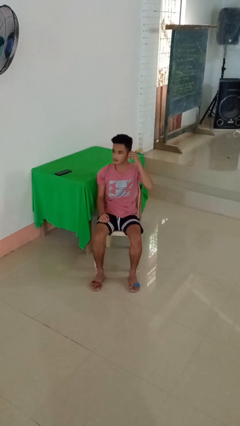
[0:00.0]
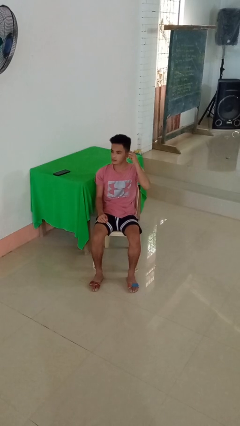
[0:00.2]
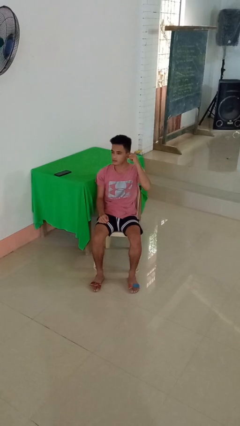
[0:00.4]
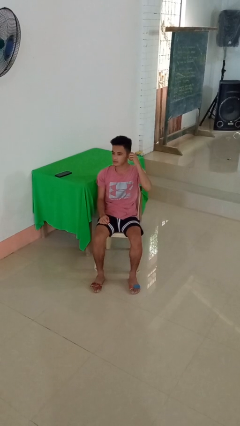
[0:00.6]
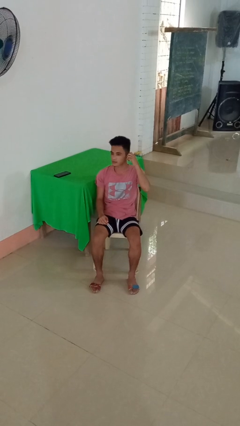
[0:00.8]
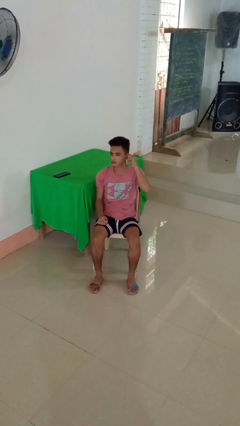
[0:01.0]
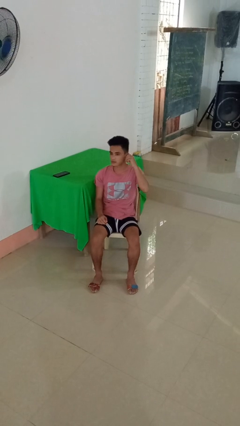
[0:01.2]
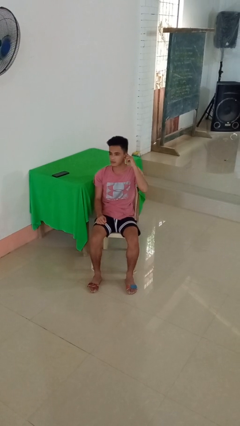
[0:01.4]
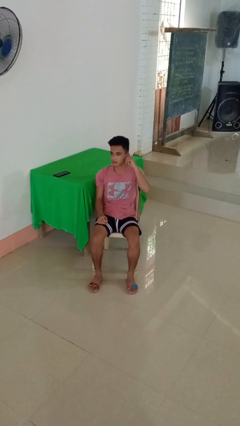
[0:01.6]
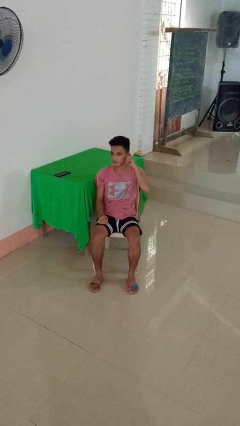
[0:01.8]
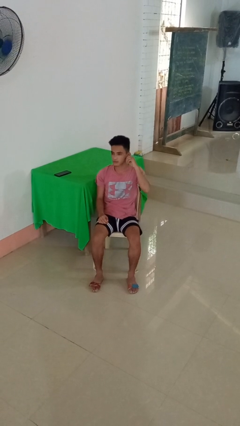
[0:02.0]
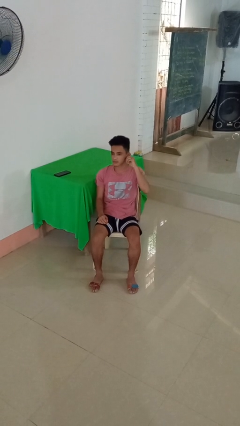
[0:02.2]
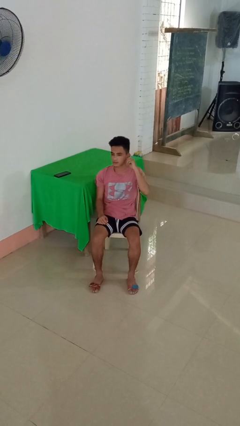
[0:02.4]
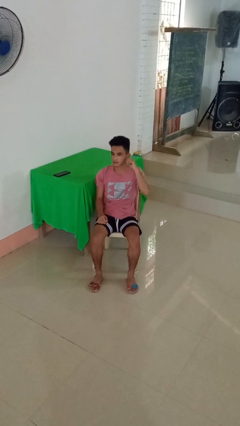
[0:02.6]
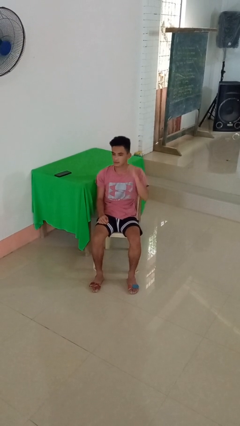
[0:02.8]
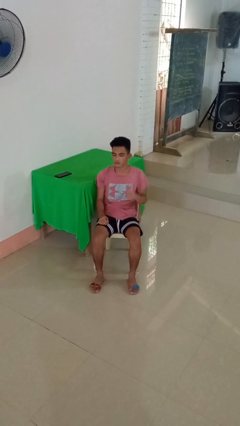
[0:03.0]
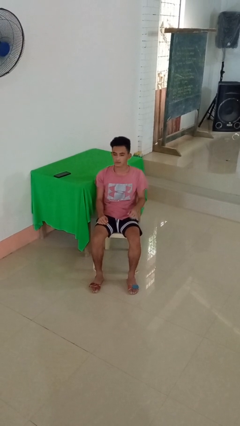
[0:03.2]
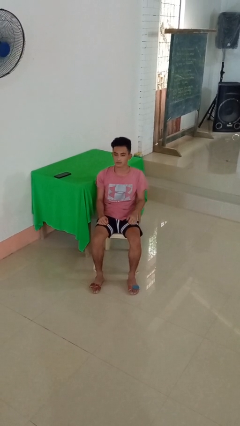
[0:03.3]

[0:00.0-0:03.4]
person touches earlobe

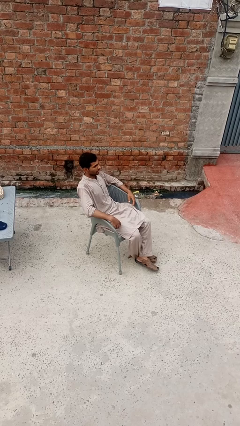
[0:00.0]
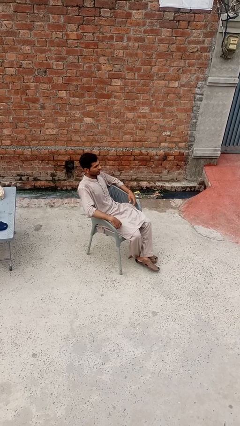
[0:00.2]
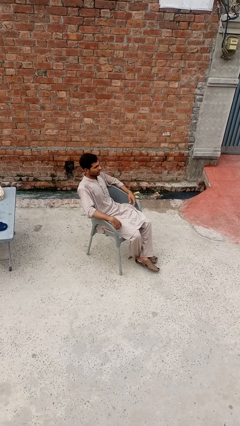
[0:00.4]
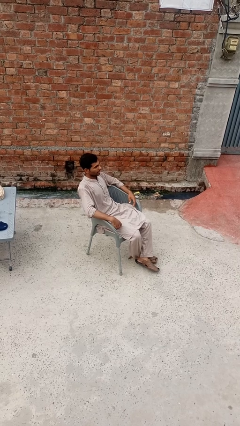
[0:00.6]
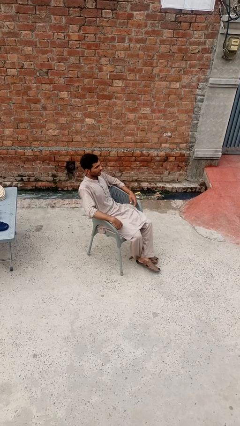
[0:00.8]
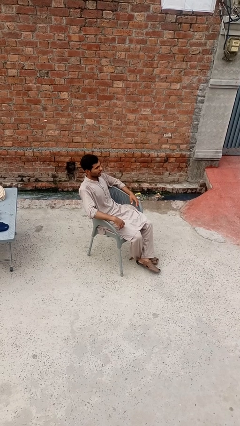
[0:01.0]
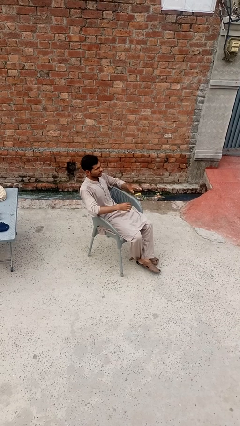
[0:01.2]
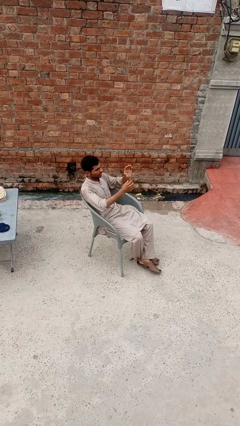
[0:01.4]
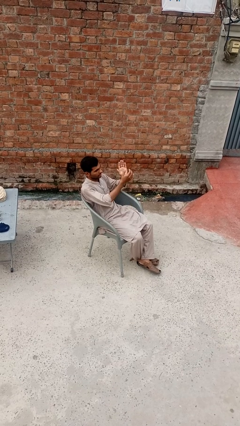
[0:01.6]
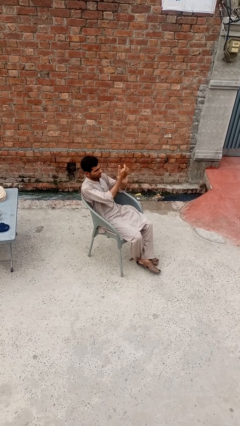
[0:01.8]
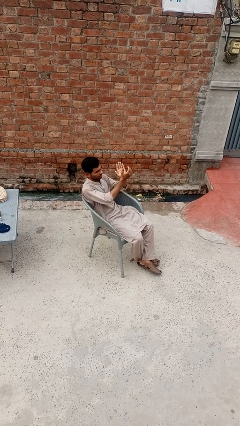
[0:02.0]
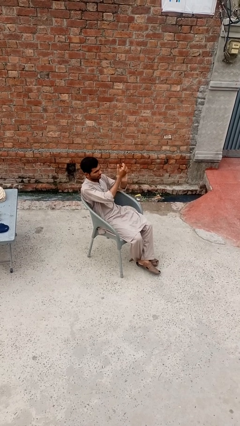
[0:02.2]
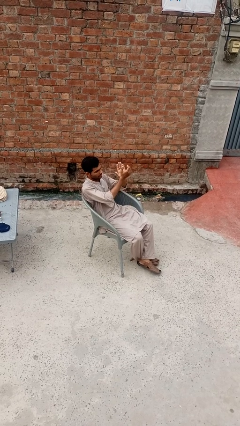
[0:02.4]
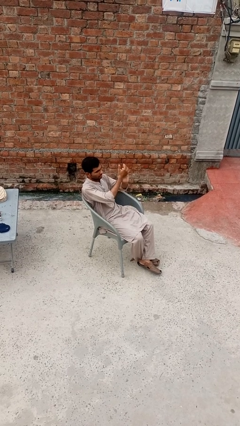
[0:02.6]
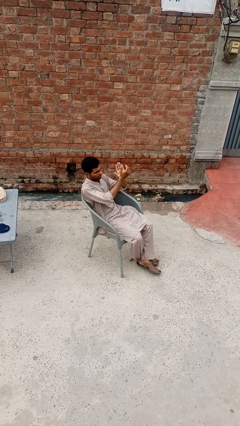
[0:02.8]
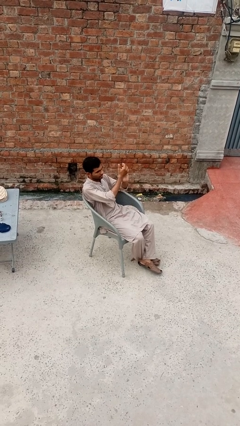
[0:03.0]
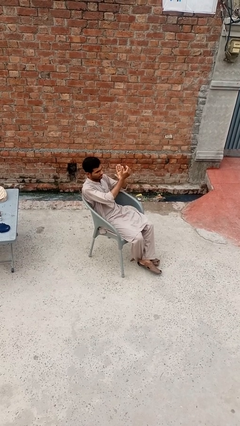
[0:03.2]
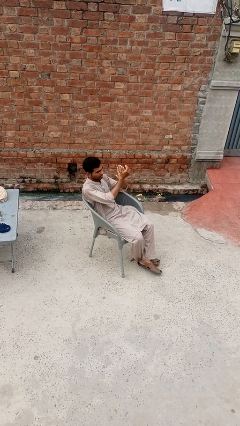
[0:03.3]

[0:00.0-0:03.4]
person claps hands

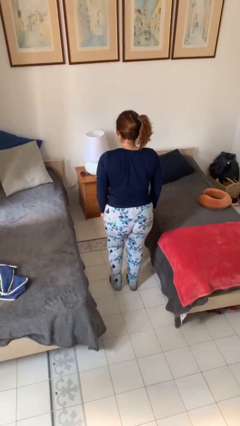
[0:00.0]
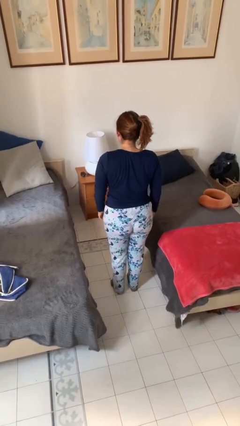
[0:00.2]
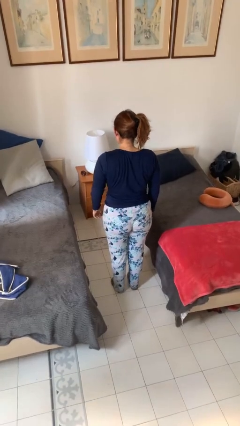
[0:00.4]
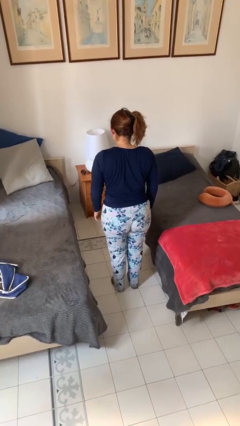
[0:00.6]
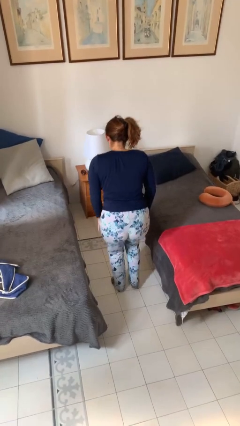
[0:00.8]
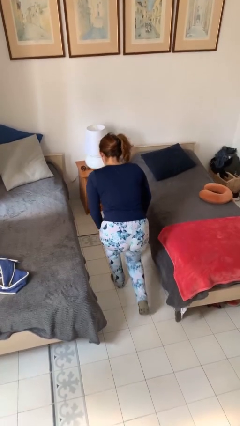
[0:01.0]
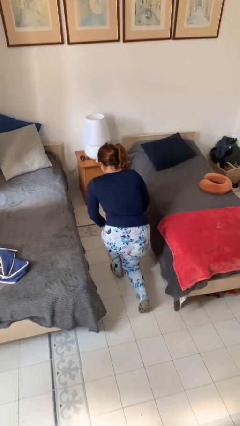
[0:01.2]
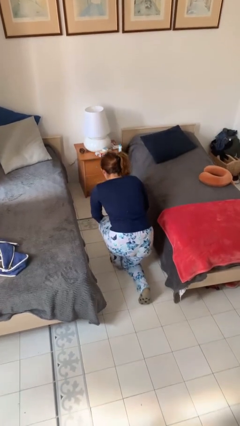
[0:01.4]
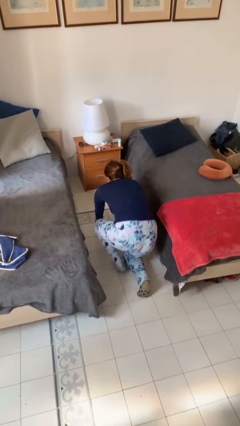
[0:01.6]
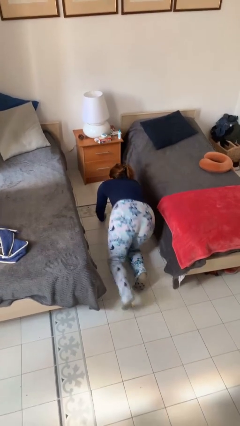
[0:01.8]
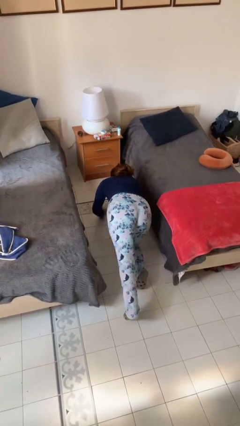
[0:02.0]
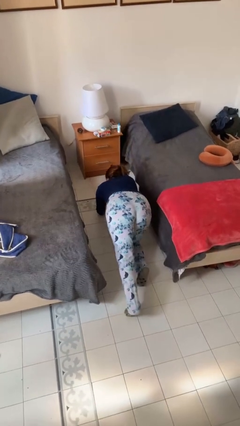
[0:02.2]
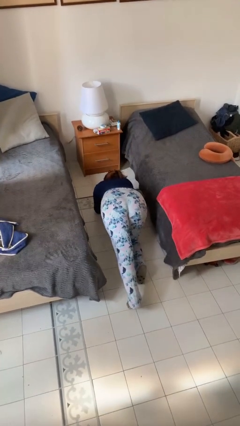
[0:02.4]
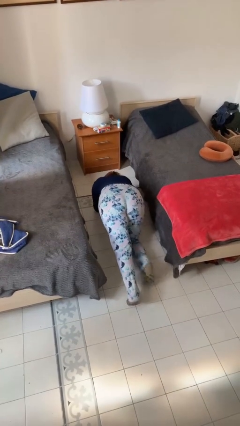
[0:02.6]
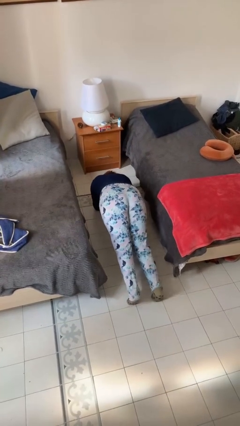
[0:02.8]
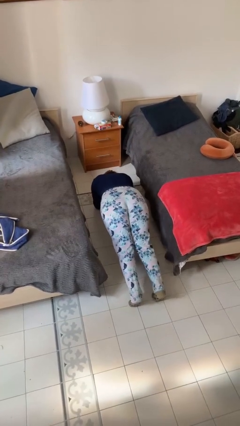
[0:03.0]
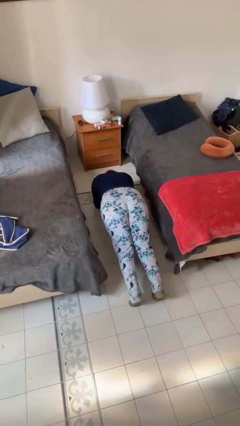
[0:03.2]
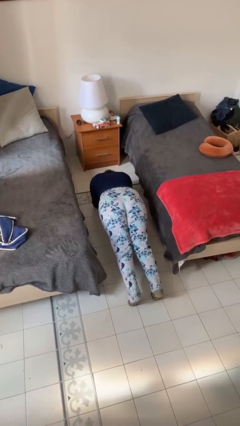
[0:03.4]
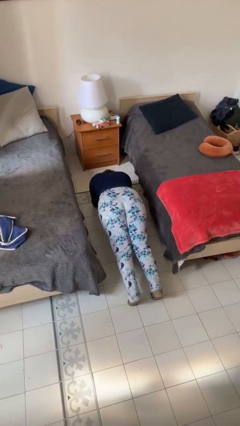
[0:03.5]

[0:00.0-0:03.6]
person exercises with plank

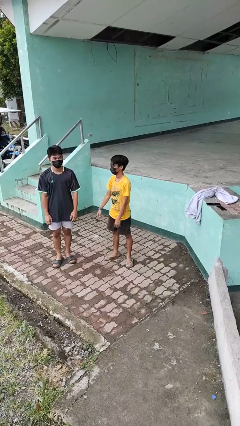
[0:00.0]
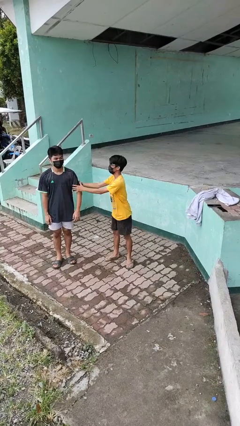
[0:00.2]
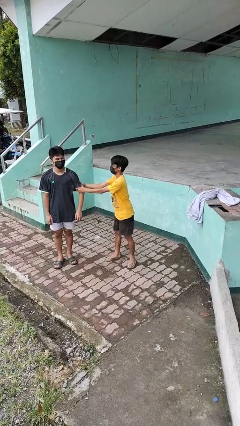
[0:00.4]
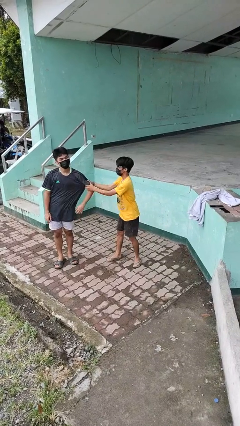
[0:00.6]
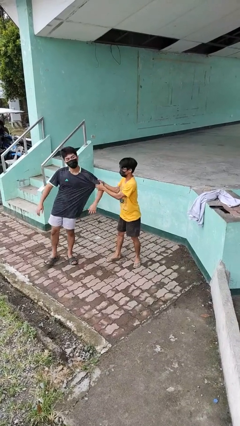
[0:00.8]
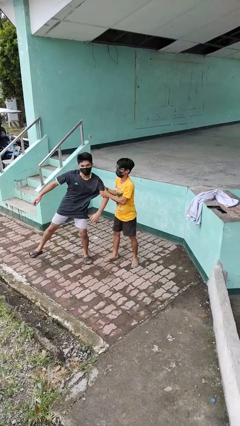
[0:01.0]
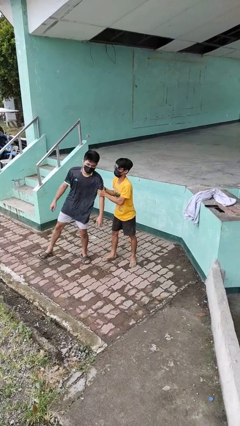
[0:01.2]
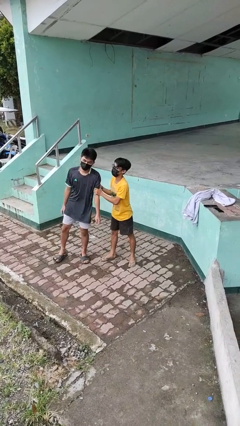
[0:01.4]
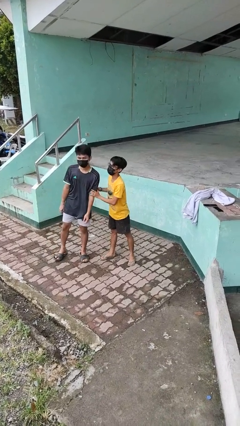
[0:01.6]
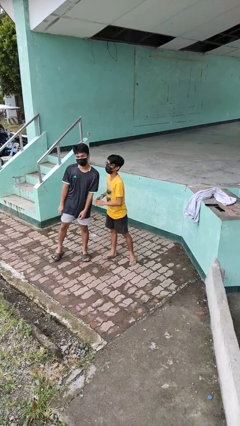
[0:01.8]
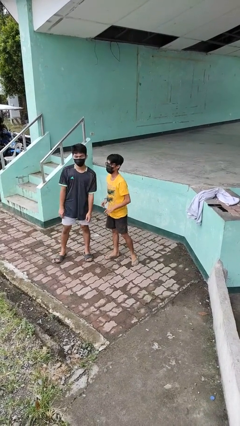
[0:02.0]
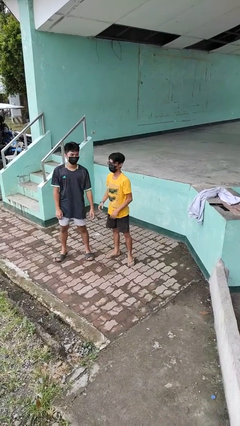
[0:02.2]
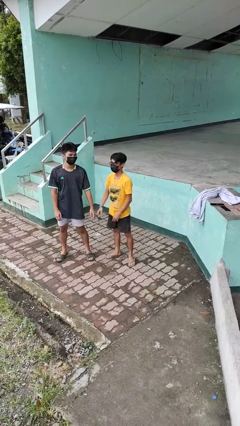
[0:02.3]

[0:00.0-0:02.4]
person grabs person by bicep

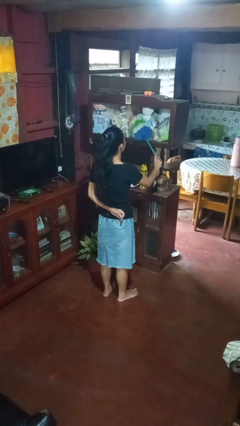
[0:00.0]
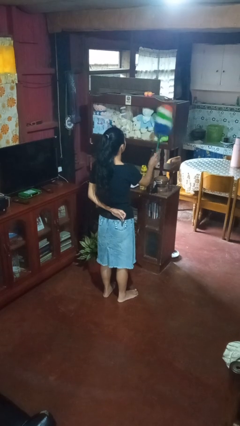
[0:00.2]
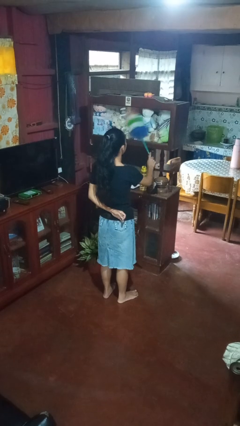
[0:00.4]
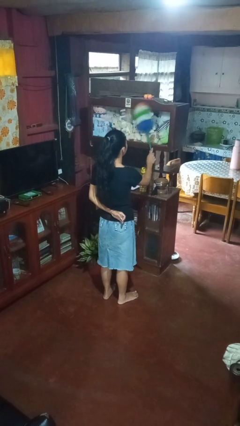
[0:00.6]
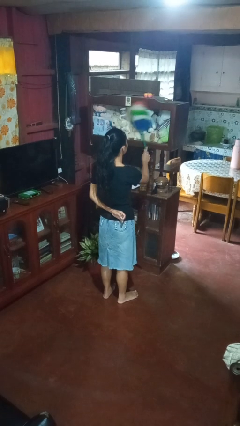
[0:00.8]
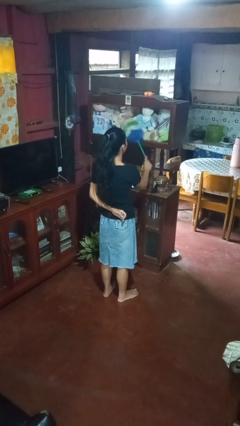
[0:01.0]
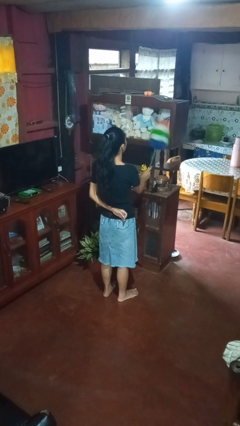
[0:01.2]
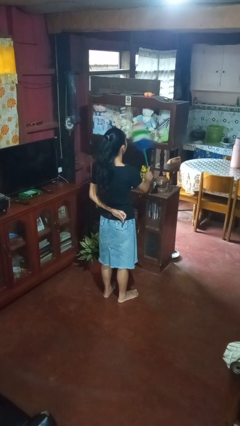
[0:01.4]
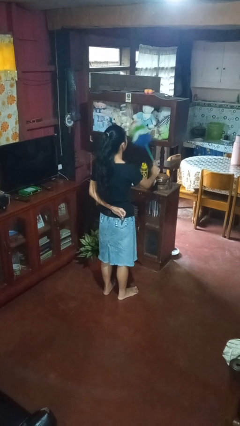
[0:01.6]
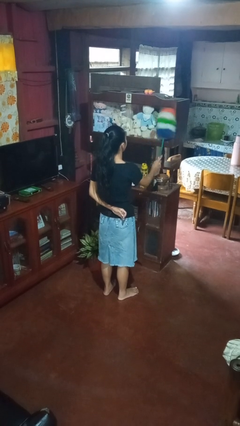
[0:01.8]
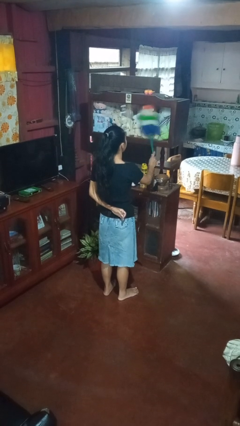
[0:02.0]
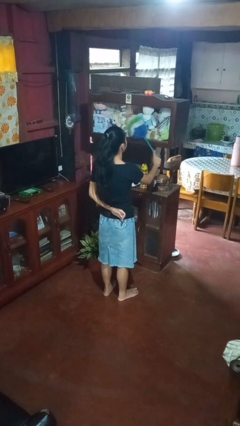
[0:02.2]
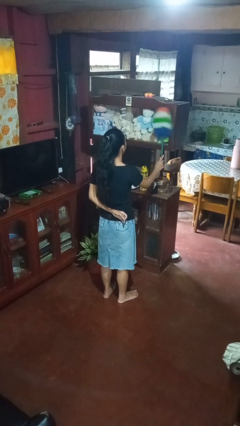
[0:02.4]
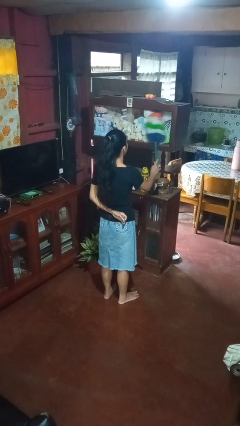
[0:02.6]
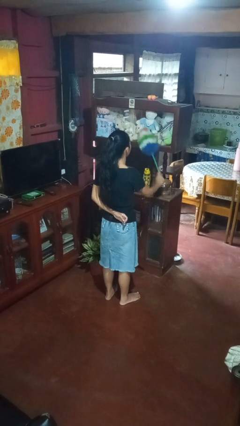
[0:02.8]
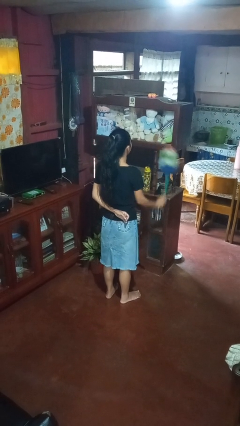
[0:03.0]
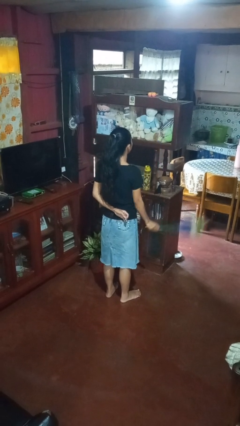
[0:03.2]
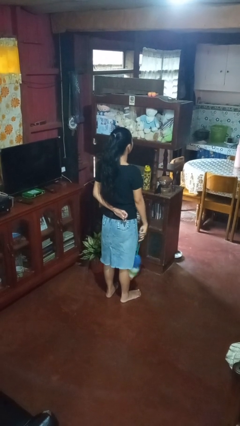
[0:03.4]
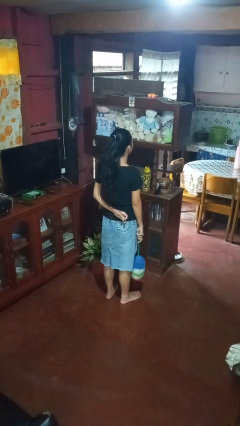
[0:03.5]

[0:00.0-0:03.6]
person dusts furniture

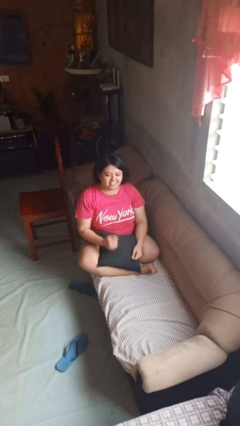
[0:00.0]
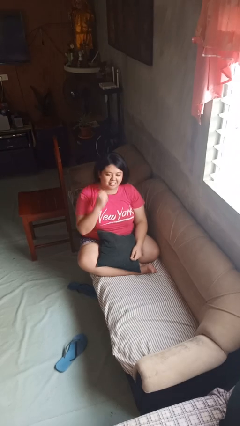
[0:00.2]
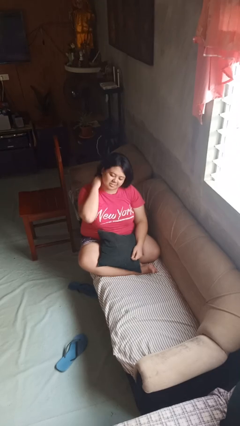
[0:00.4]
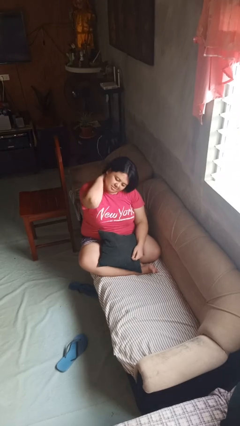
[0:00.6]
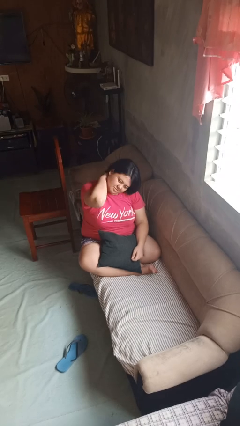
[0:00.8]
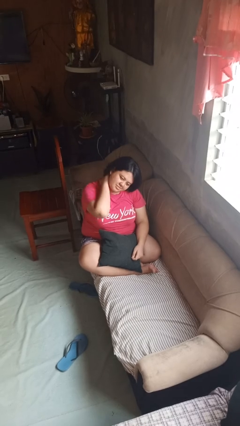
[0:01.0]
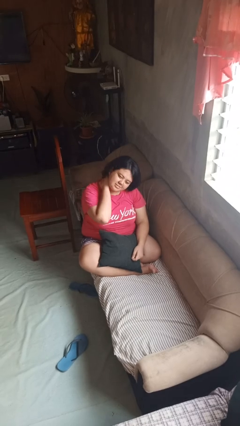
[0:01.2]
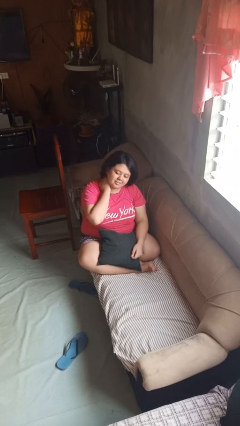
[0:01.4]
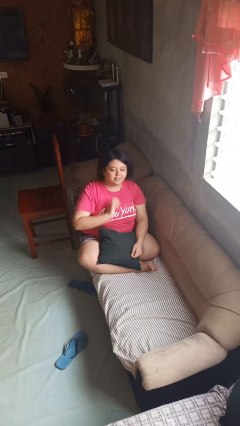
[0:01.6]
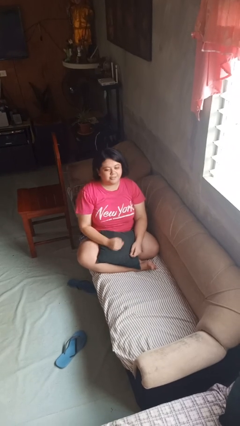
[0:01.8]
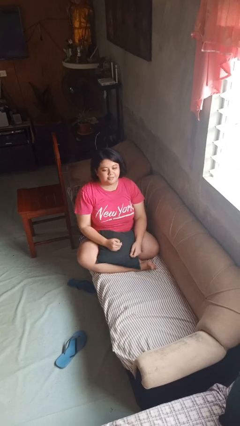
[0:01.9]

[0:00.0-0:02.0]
person rubs neck
